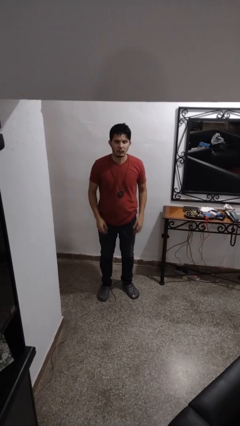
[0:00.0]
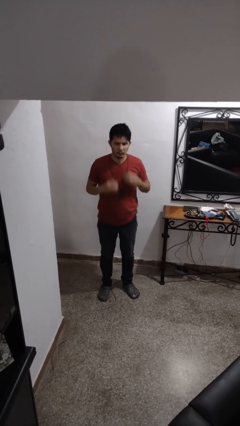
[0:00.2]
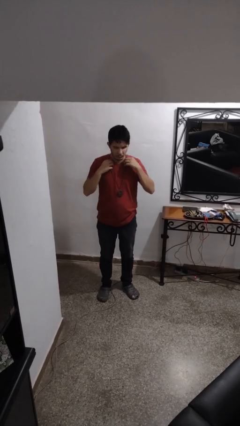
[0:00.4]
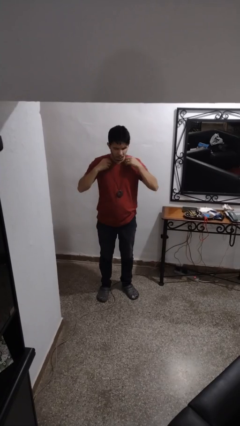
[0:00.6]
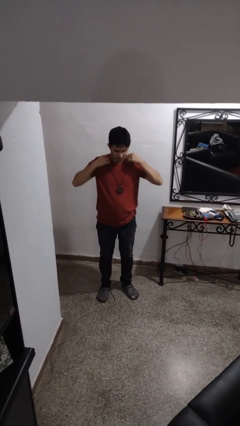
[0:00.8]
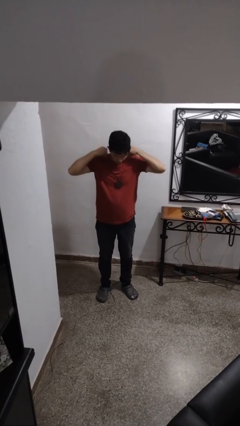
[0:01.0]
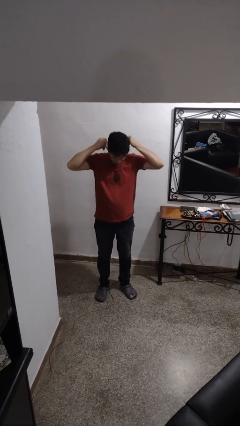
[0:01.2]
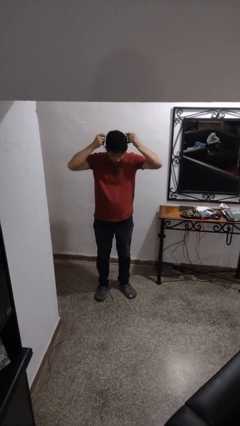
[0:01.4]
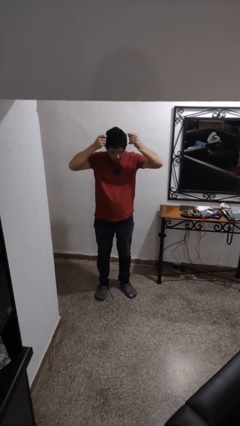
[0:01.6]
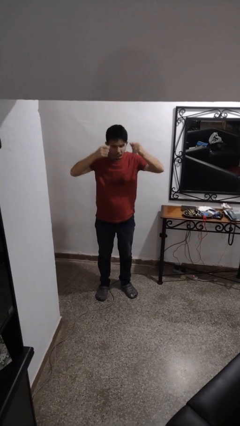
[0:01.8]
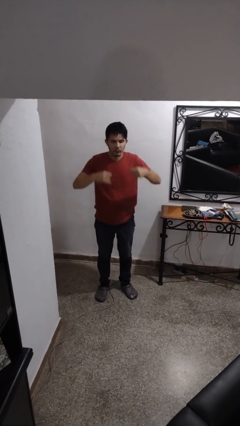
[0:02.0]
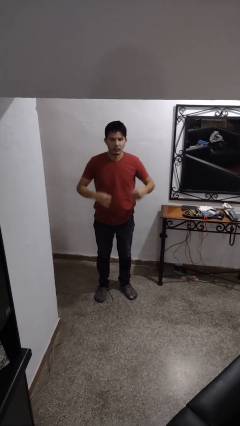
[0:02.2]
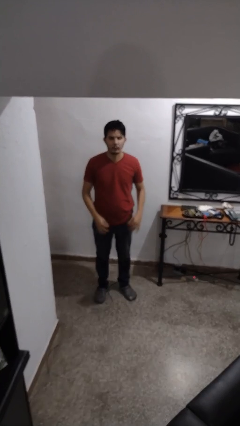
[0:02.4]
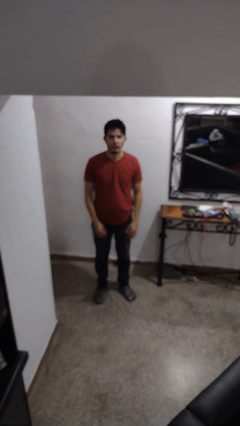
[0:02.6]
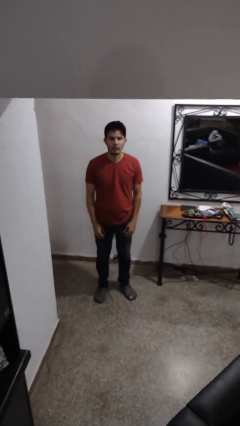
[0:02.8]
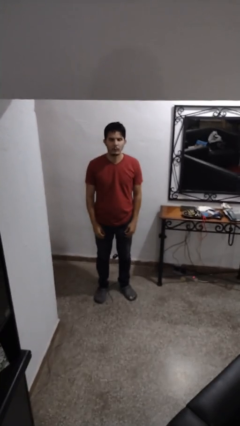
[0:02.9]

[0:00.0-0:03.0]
person takes off necklace

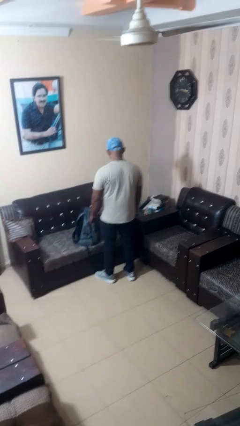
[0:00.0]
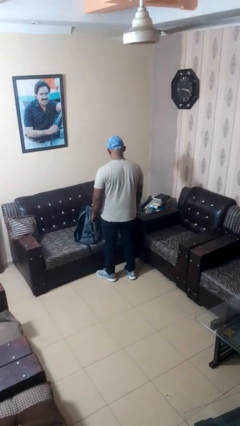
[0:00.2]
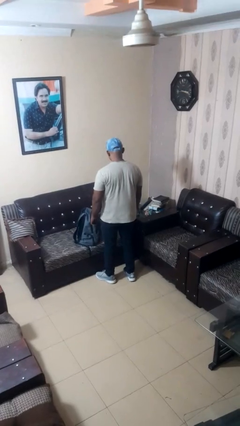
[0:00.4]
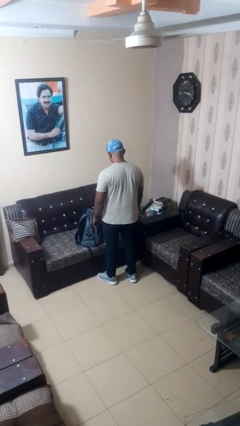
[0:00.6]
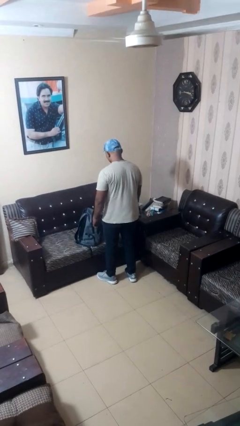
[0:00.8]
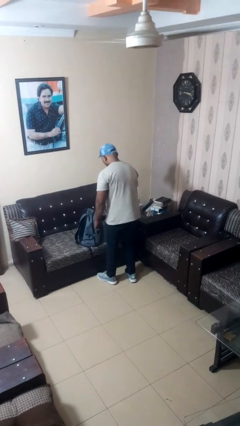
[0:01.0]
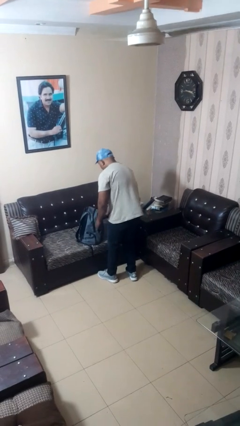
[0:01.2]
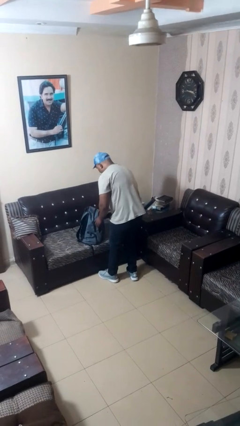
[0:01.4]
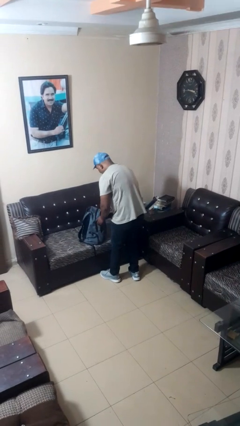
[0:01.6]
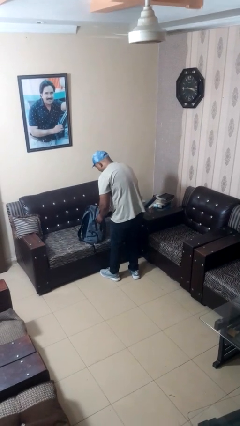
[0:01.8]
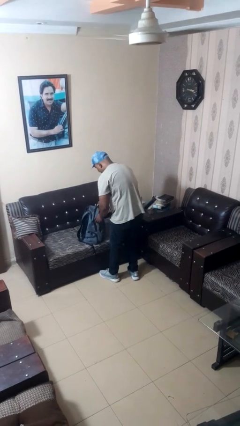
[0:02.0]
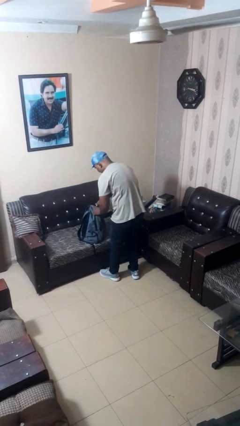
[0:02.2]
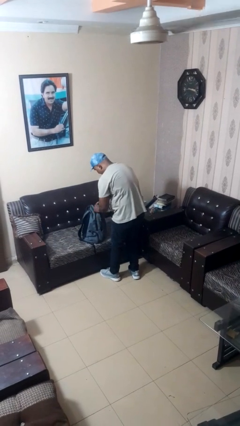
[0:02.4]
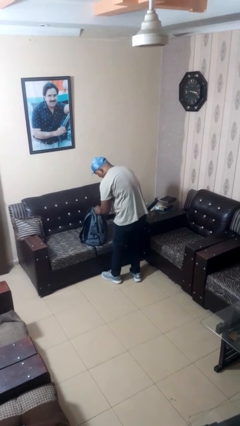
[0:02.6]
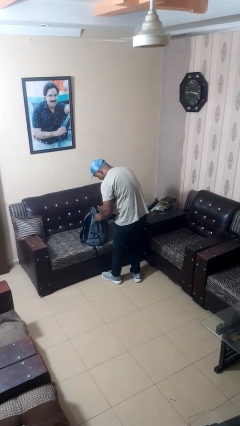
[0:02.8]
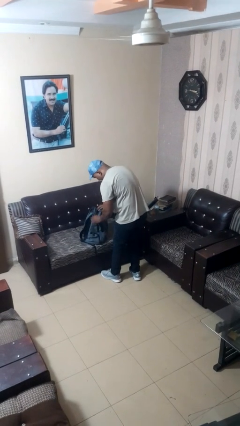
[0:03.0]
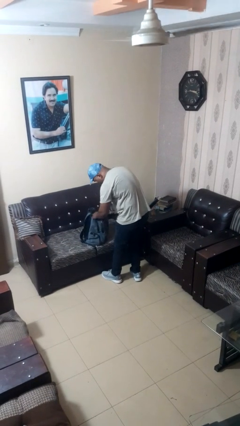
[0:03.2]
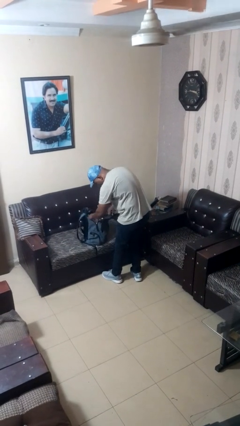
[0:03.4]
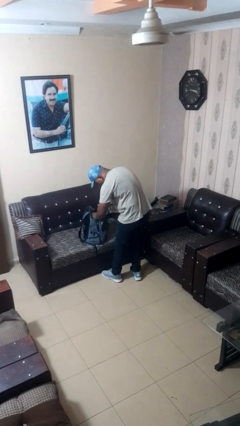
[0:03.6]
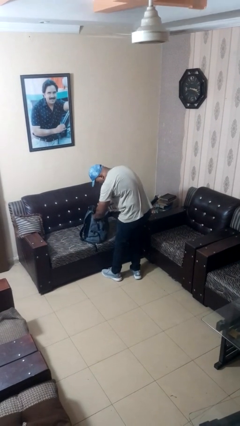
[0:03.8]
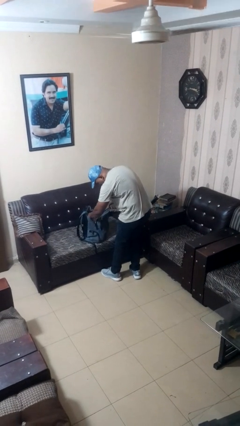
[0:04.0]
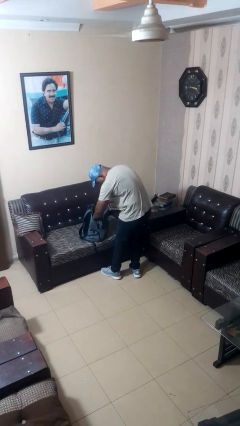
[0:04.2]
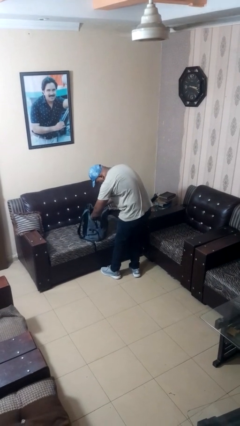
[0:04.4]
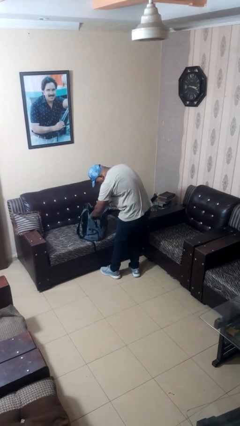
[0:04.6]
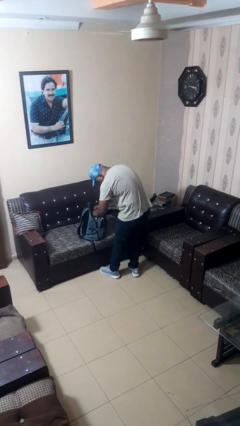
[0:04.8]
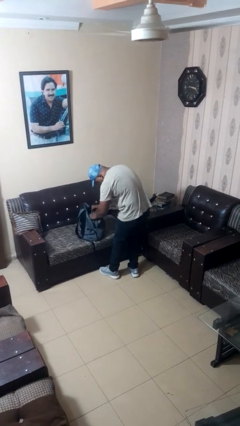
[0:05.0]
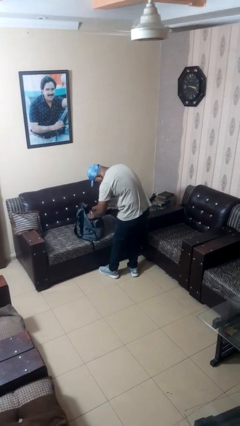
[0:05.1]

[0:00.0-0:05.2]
person searches in backpack

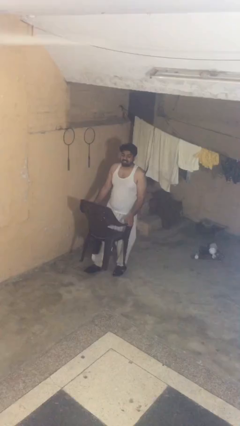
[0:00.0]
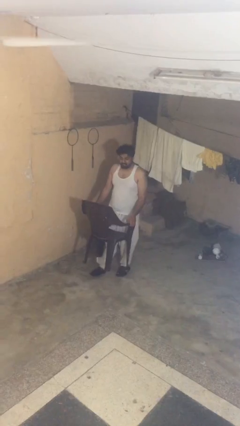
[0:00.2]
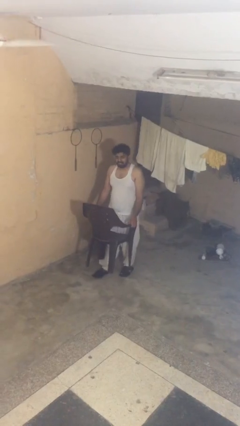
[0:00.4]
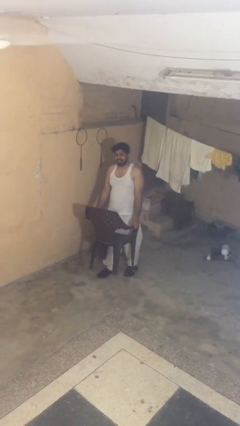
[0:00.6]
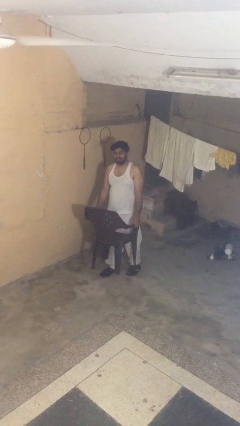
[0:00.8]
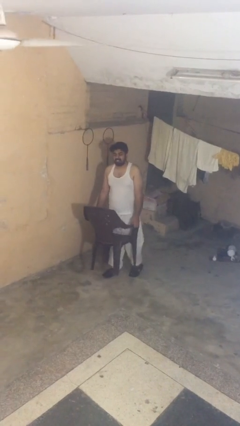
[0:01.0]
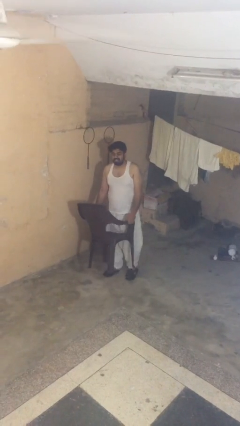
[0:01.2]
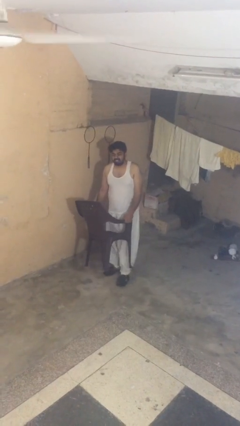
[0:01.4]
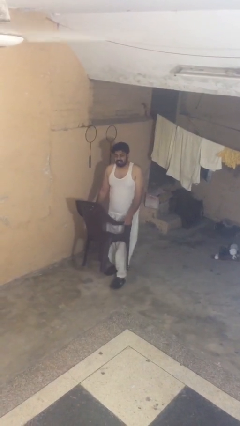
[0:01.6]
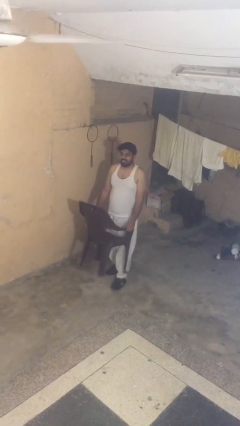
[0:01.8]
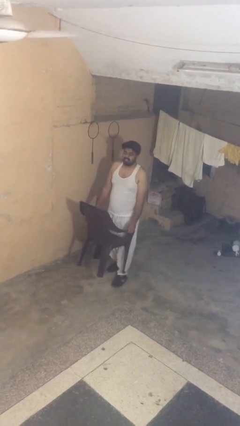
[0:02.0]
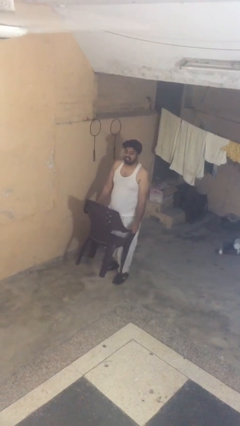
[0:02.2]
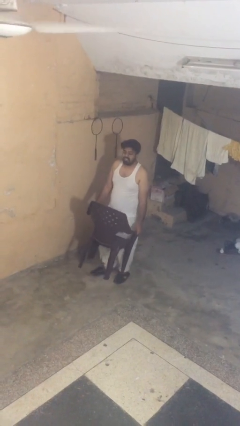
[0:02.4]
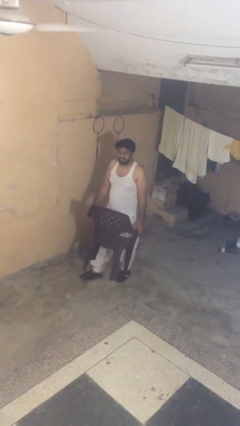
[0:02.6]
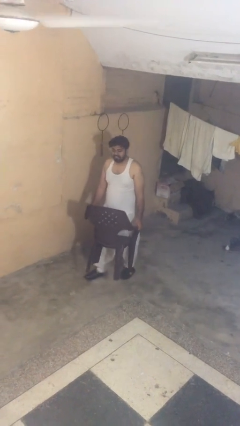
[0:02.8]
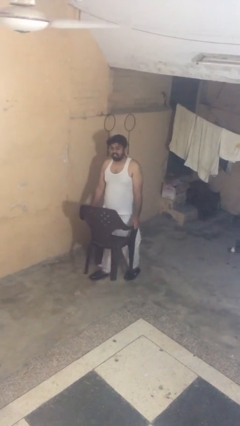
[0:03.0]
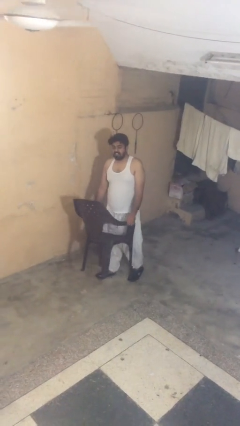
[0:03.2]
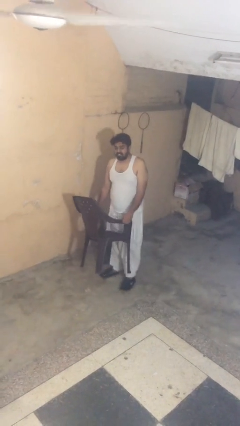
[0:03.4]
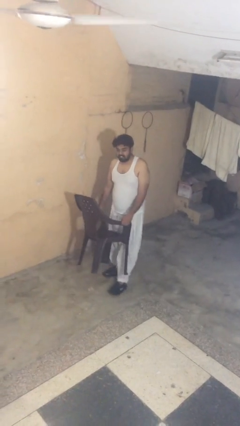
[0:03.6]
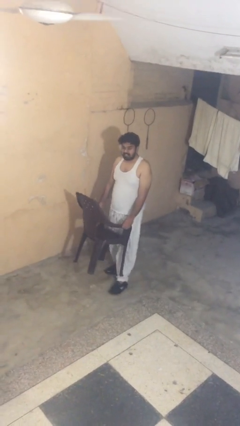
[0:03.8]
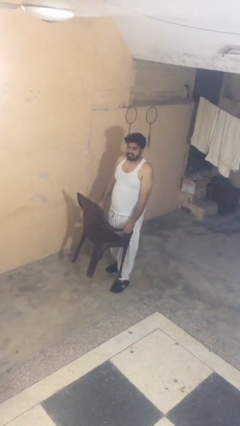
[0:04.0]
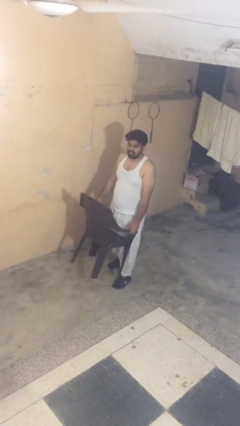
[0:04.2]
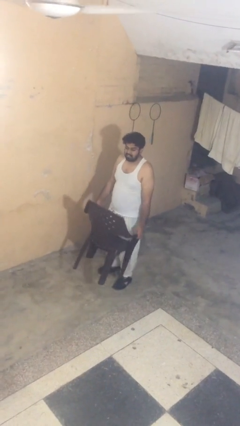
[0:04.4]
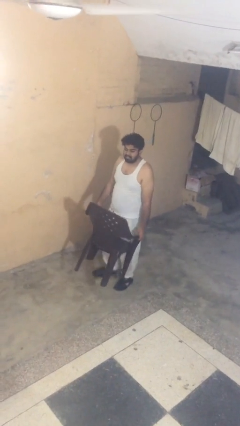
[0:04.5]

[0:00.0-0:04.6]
person carries heavy object

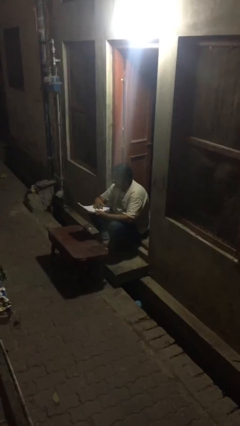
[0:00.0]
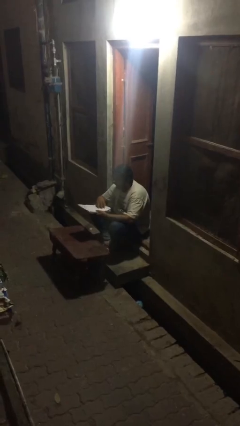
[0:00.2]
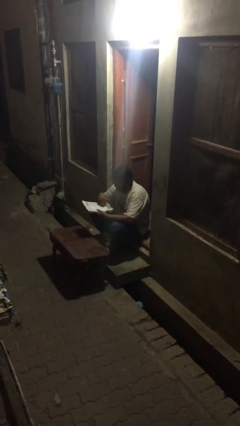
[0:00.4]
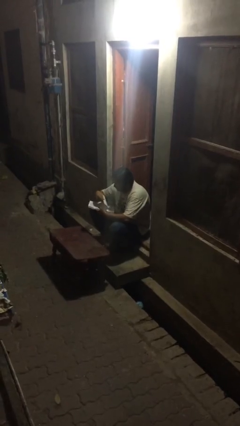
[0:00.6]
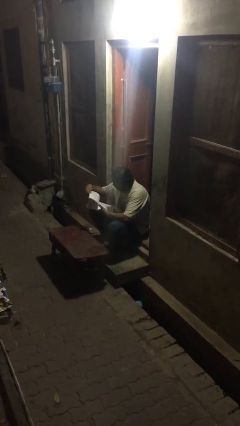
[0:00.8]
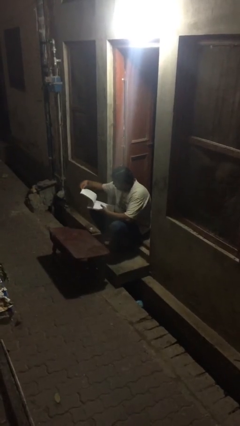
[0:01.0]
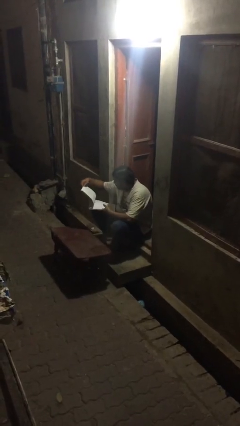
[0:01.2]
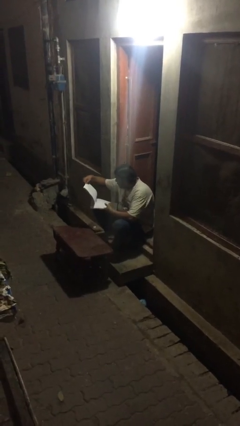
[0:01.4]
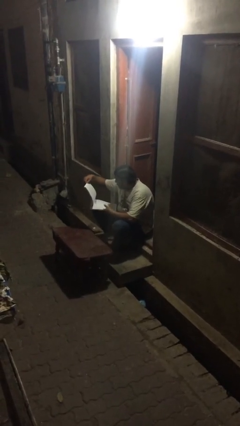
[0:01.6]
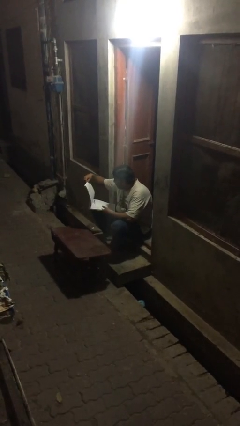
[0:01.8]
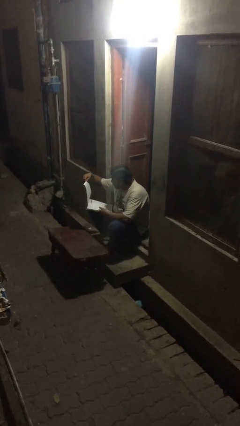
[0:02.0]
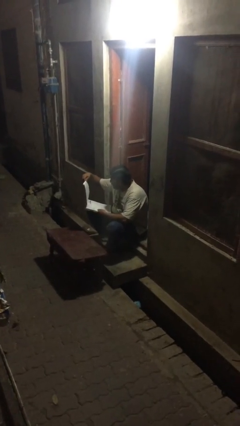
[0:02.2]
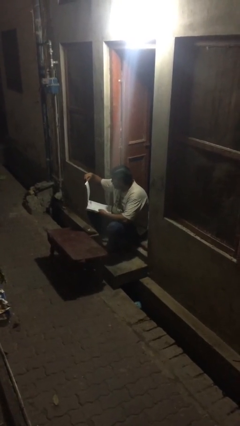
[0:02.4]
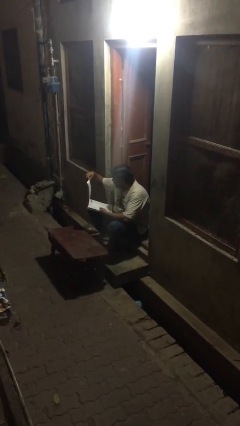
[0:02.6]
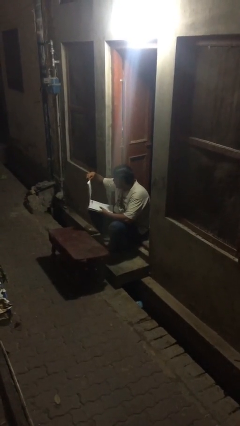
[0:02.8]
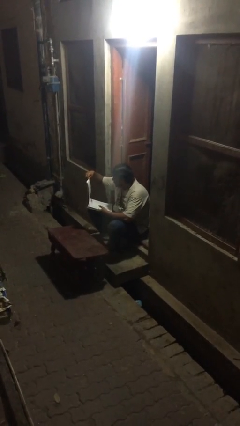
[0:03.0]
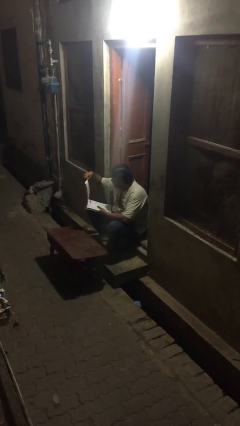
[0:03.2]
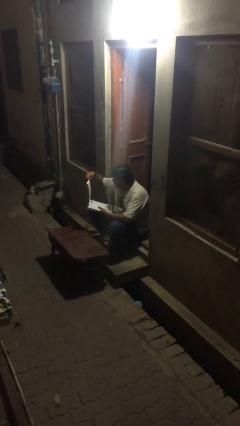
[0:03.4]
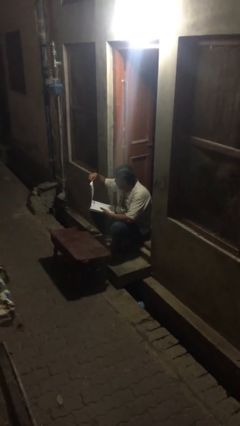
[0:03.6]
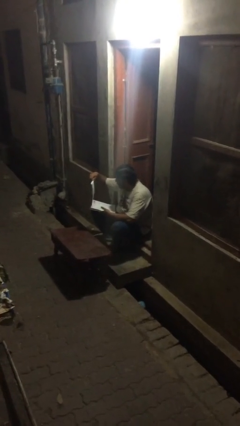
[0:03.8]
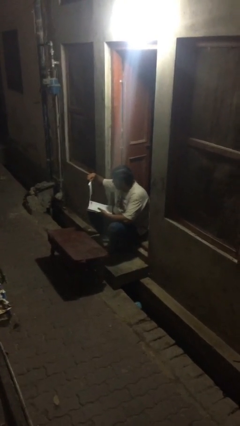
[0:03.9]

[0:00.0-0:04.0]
person reads document

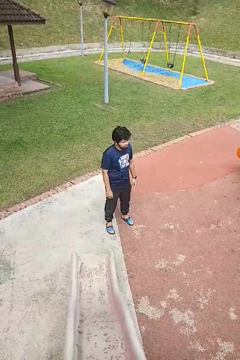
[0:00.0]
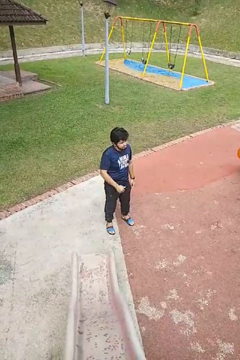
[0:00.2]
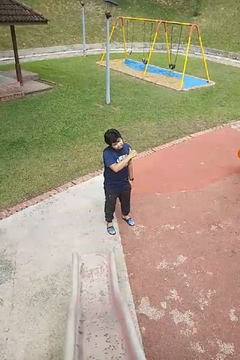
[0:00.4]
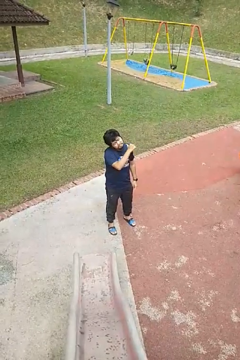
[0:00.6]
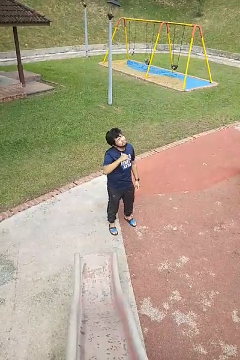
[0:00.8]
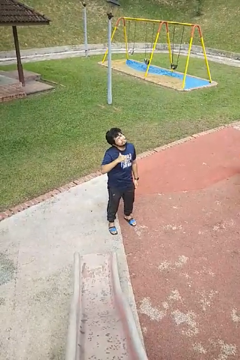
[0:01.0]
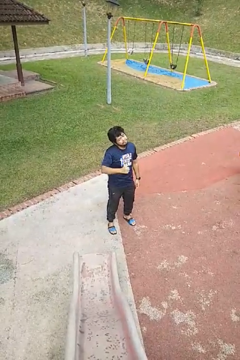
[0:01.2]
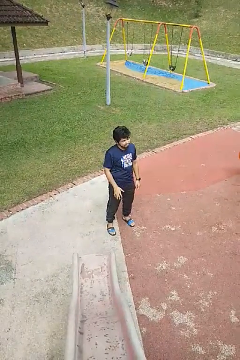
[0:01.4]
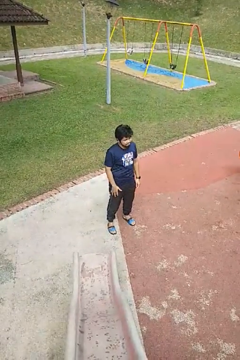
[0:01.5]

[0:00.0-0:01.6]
person gestures cut
